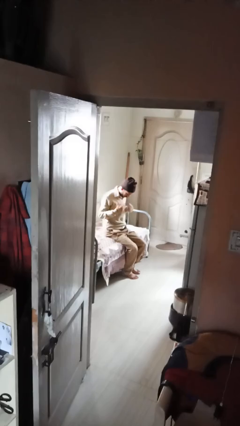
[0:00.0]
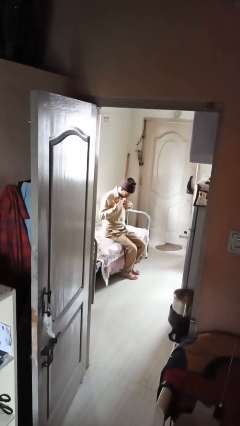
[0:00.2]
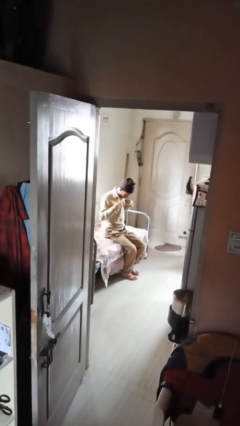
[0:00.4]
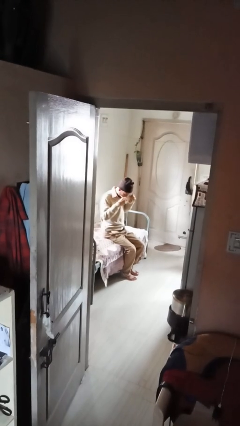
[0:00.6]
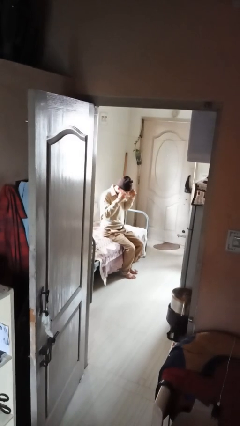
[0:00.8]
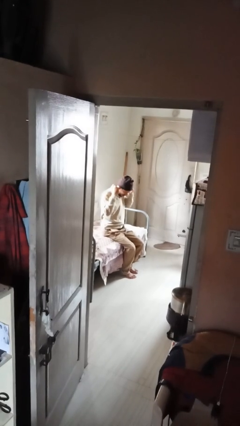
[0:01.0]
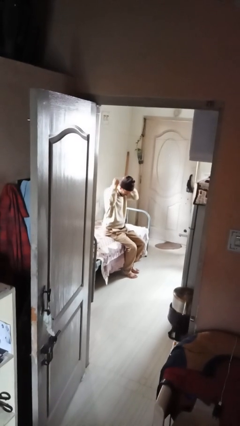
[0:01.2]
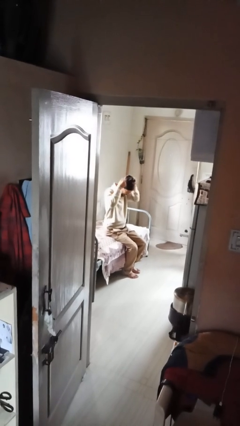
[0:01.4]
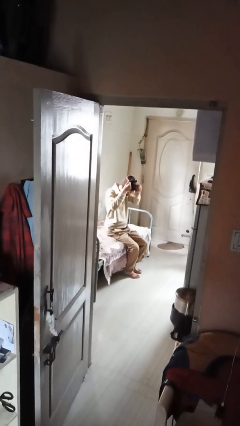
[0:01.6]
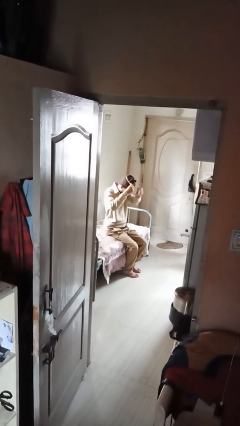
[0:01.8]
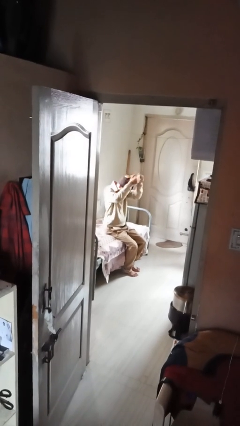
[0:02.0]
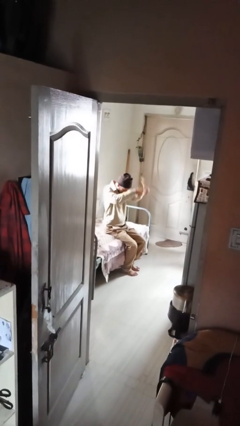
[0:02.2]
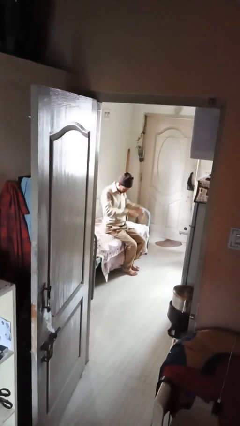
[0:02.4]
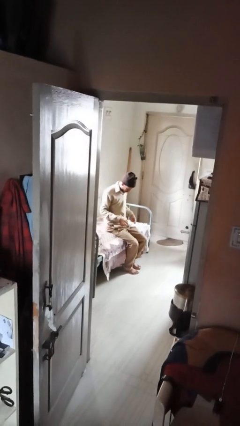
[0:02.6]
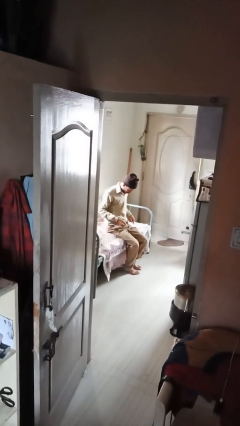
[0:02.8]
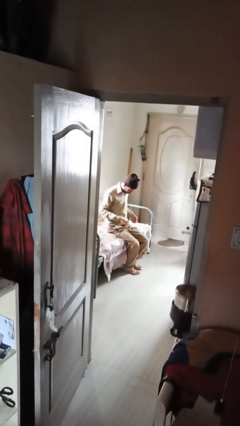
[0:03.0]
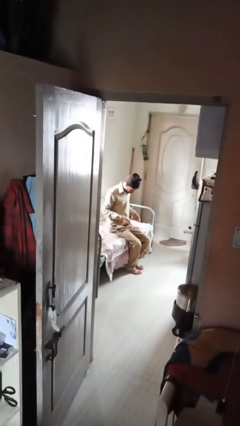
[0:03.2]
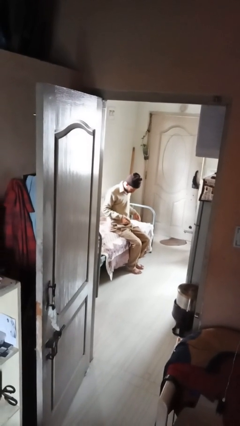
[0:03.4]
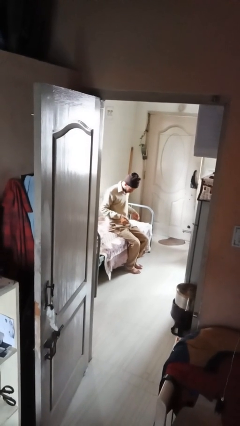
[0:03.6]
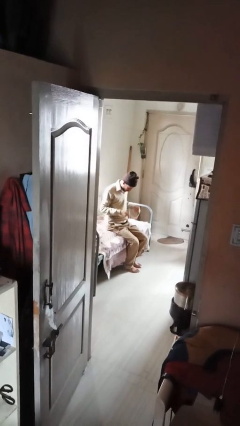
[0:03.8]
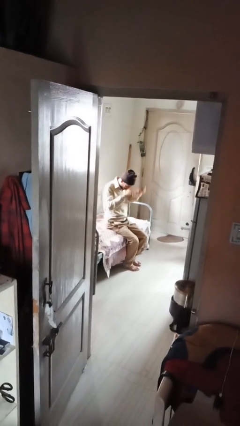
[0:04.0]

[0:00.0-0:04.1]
person takes off necklace

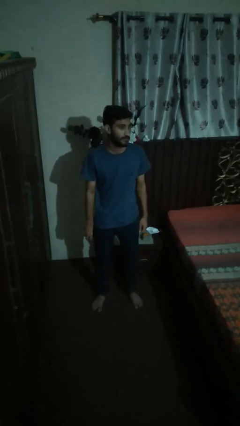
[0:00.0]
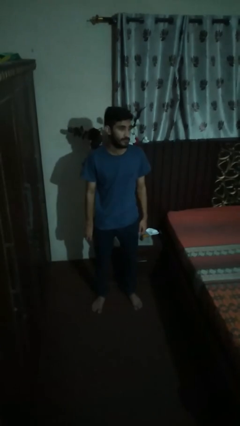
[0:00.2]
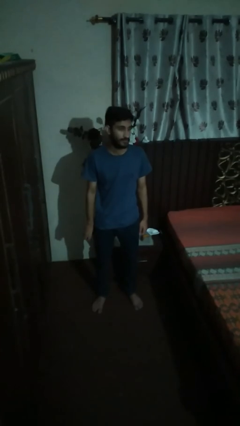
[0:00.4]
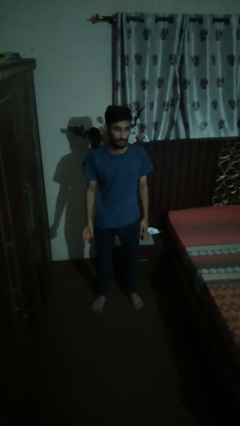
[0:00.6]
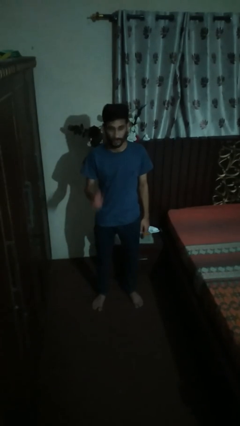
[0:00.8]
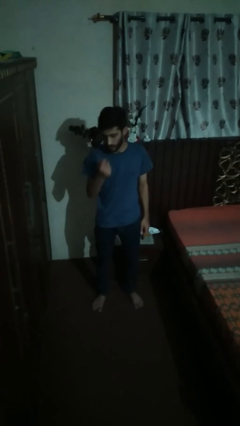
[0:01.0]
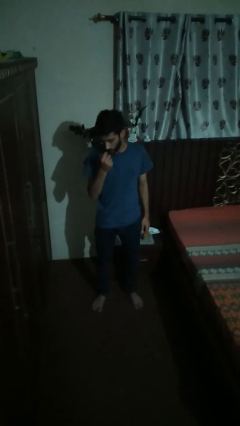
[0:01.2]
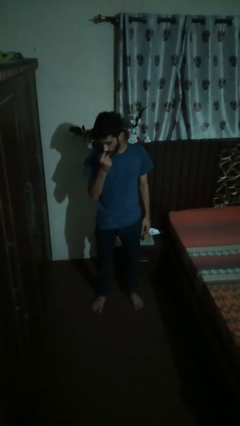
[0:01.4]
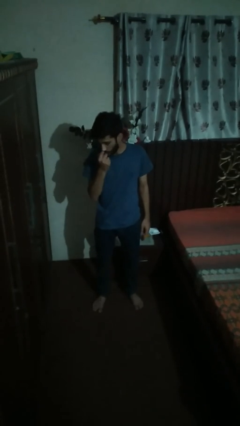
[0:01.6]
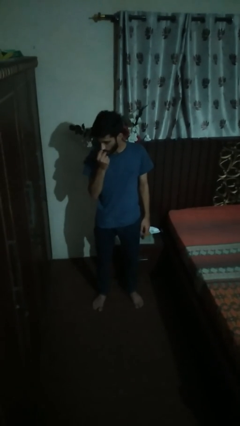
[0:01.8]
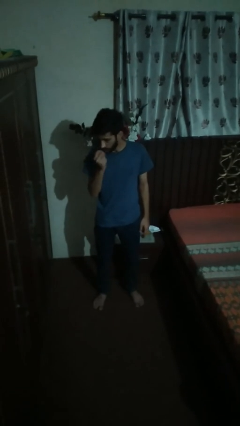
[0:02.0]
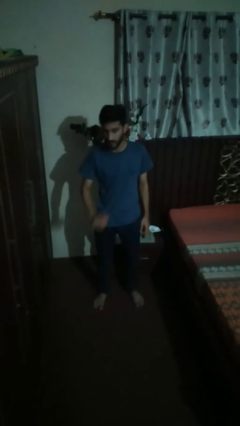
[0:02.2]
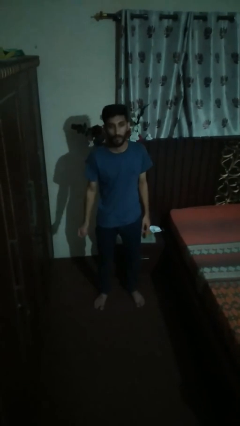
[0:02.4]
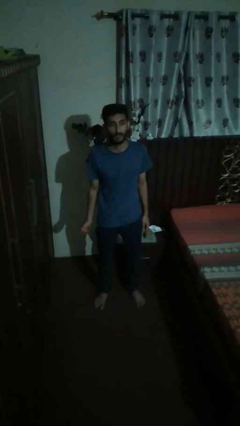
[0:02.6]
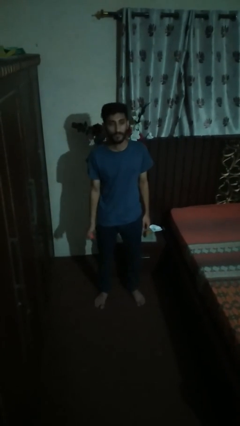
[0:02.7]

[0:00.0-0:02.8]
person eats apple

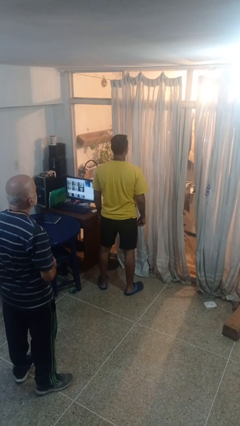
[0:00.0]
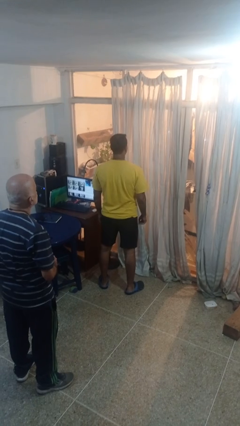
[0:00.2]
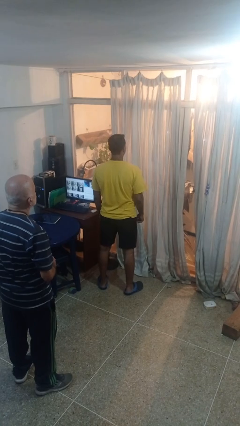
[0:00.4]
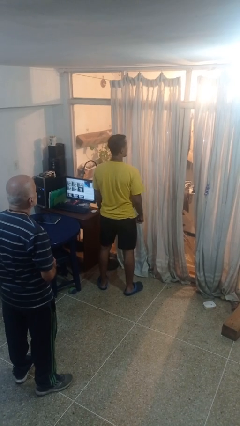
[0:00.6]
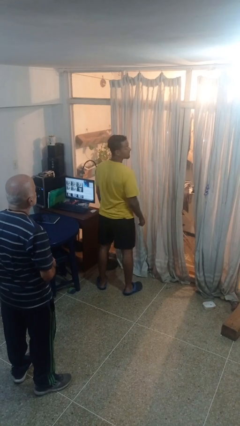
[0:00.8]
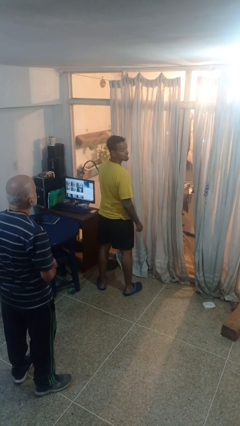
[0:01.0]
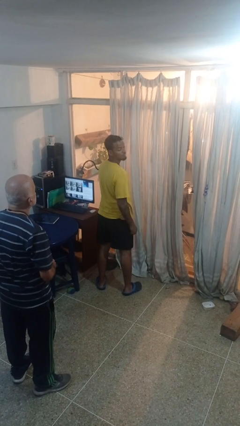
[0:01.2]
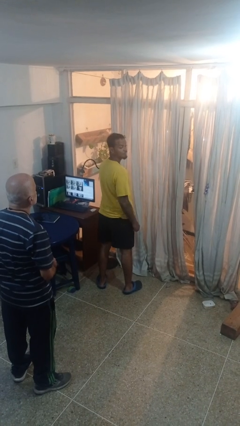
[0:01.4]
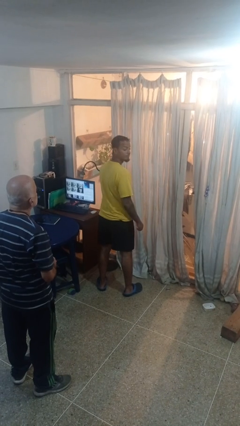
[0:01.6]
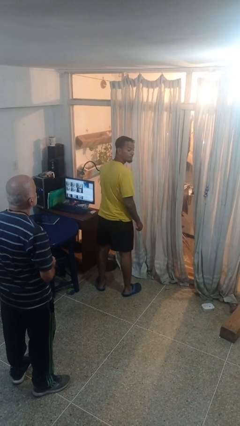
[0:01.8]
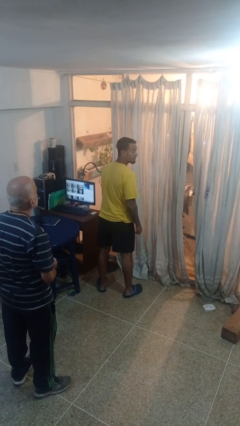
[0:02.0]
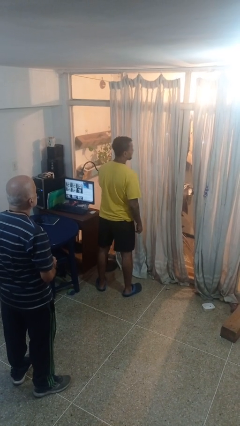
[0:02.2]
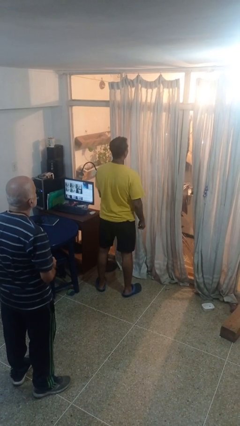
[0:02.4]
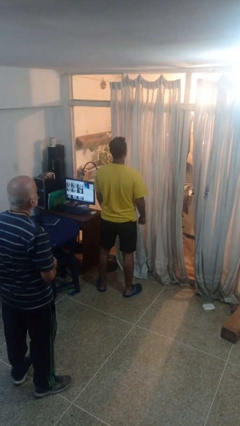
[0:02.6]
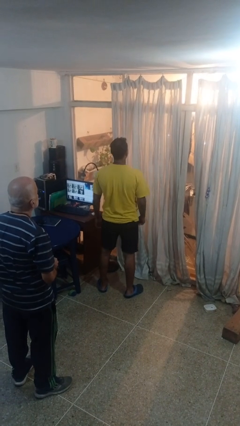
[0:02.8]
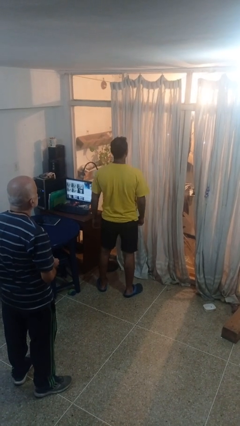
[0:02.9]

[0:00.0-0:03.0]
person looks over shoulder

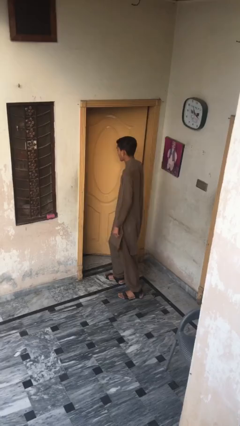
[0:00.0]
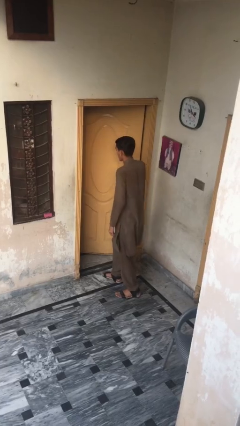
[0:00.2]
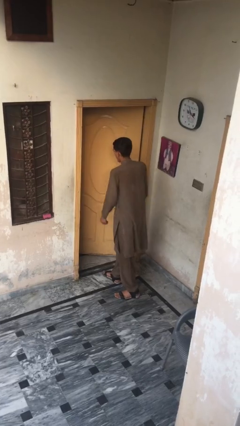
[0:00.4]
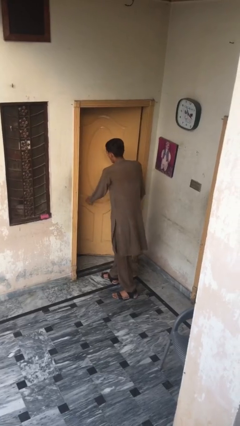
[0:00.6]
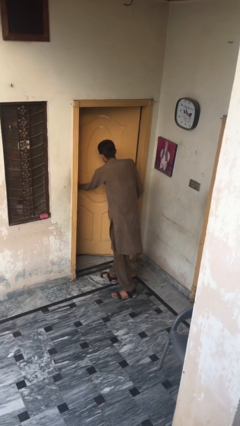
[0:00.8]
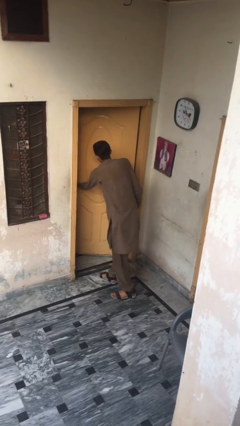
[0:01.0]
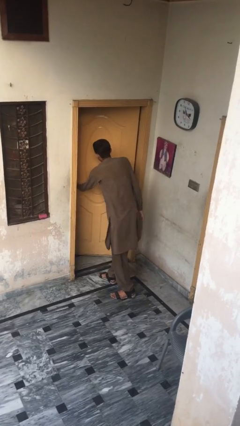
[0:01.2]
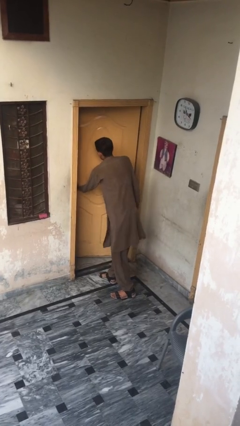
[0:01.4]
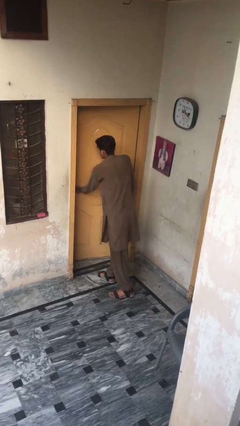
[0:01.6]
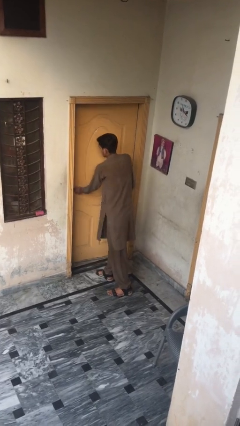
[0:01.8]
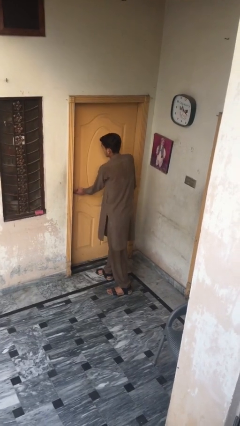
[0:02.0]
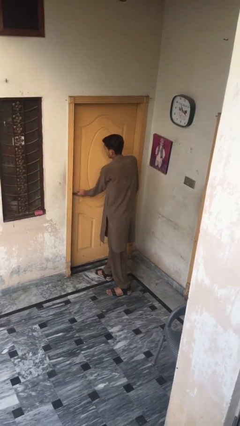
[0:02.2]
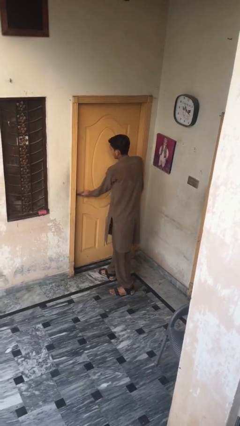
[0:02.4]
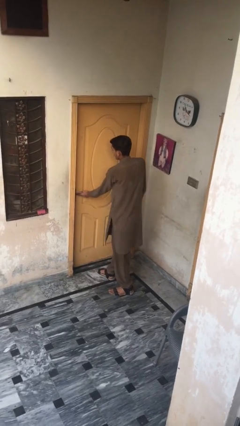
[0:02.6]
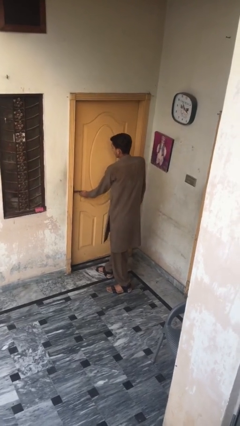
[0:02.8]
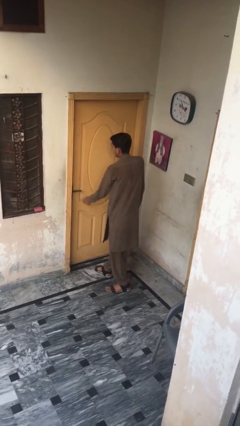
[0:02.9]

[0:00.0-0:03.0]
person closes facility door

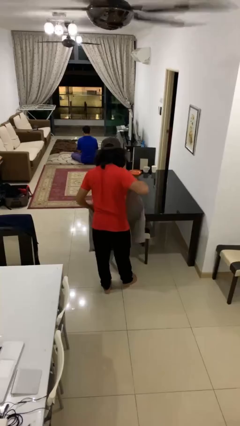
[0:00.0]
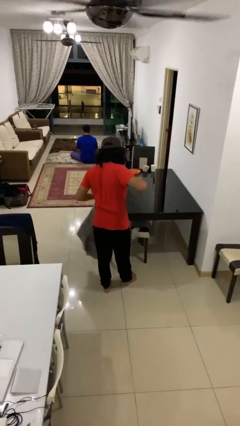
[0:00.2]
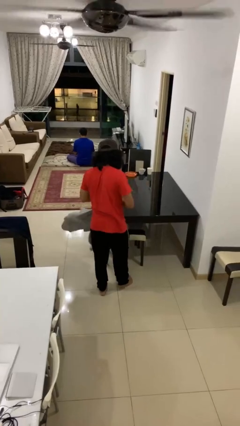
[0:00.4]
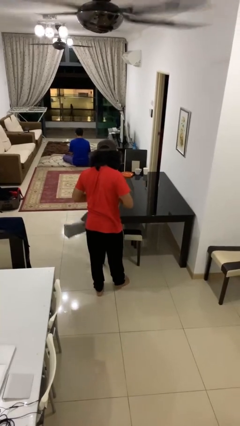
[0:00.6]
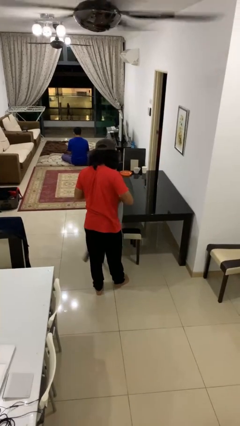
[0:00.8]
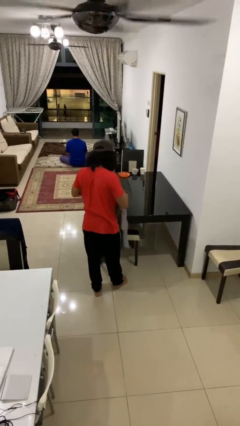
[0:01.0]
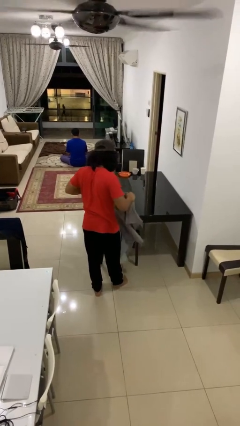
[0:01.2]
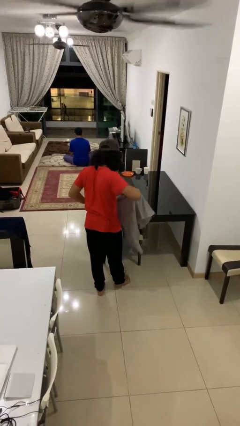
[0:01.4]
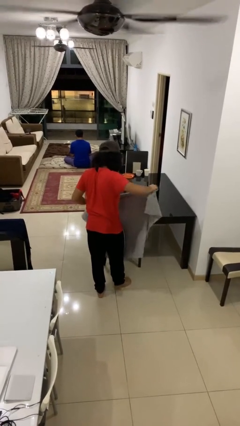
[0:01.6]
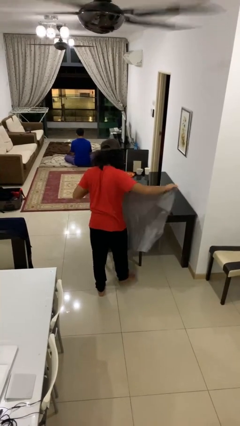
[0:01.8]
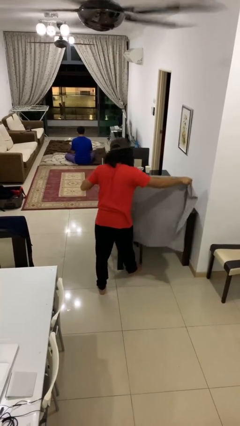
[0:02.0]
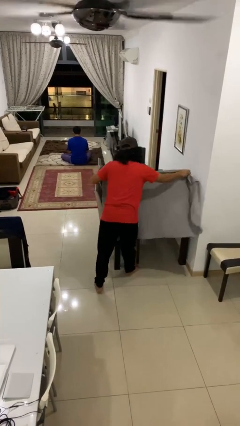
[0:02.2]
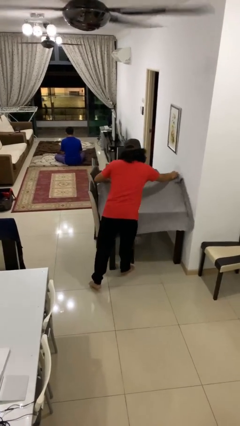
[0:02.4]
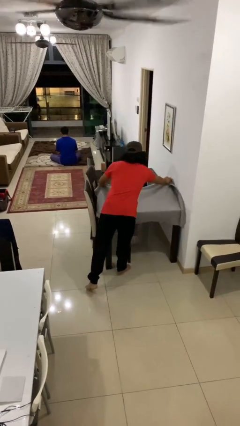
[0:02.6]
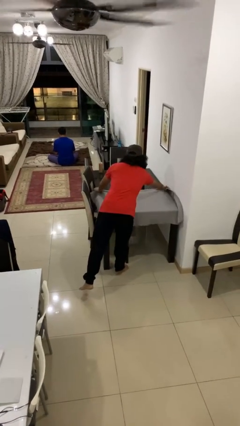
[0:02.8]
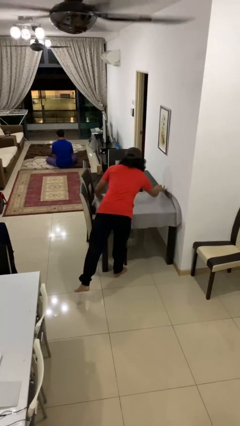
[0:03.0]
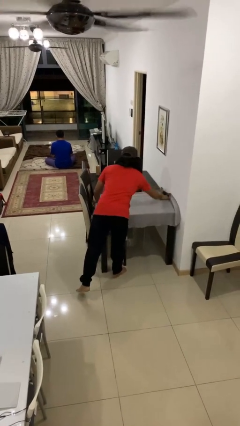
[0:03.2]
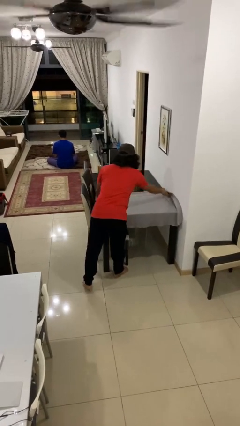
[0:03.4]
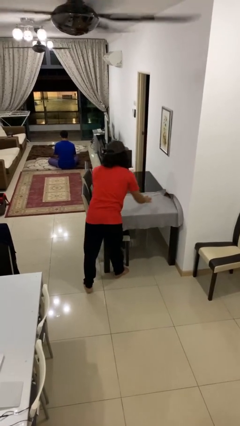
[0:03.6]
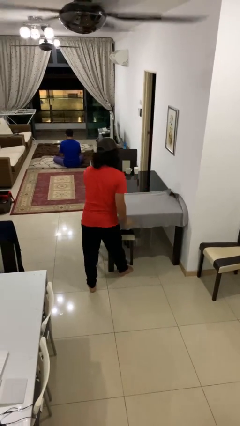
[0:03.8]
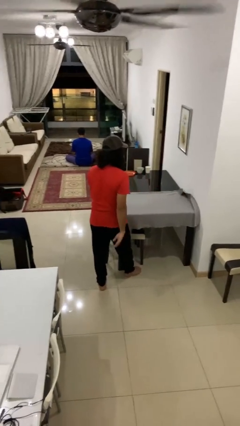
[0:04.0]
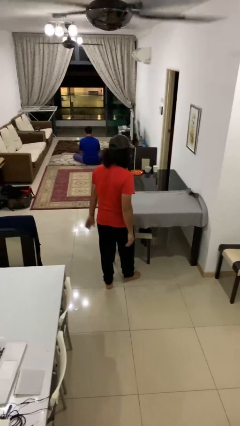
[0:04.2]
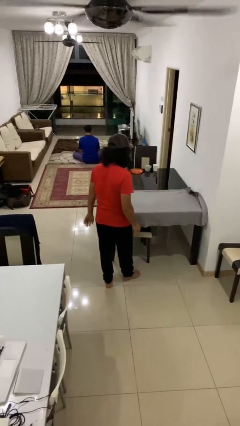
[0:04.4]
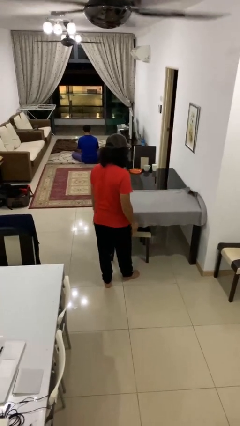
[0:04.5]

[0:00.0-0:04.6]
person spreads tablecloth
